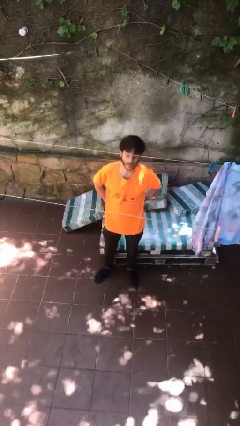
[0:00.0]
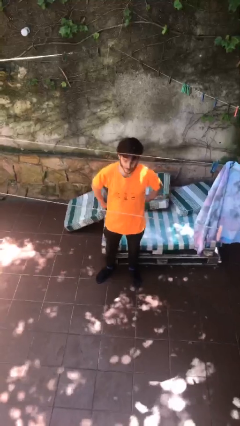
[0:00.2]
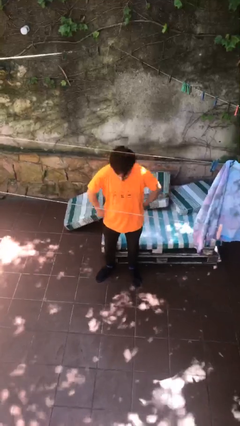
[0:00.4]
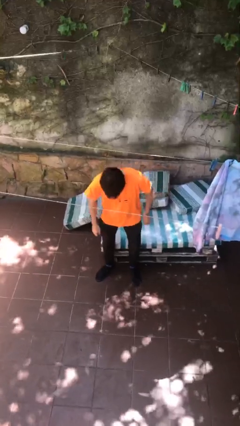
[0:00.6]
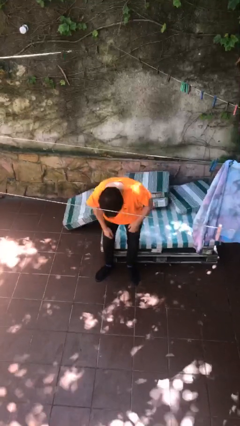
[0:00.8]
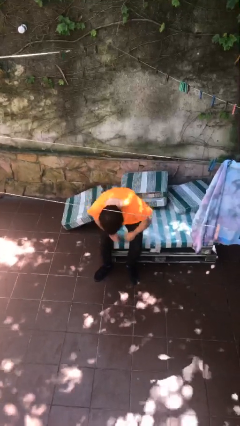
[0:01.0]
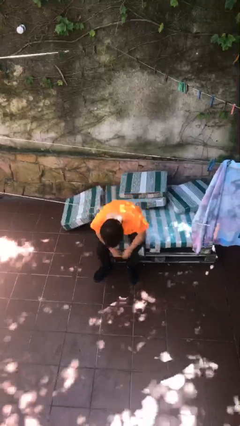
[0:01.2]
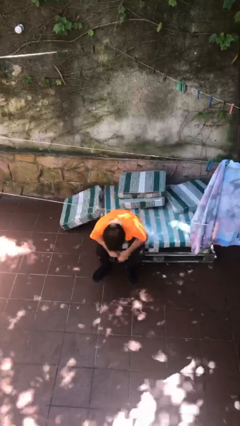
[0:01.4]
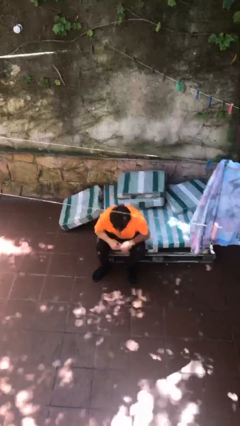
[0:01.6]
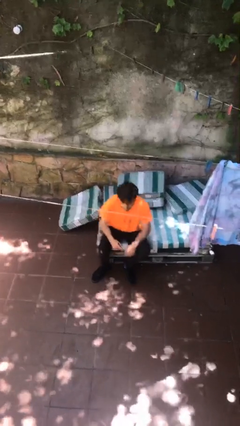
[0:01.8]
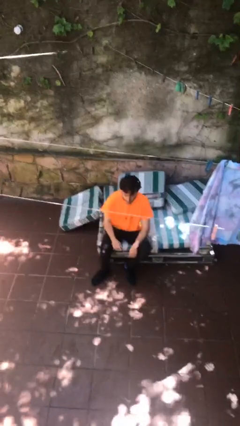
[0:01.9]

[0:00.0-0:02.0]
person sits down

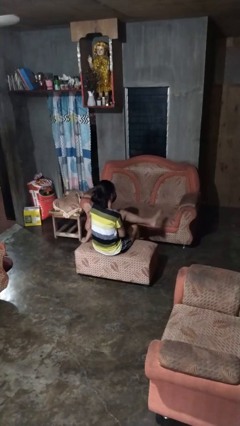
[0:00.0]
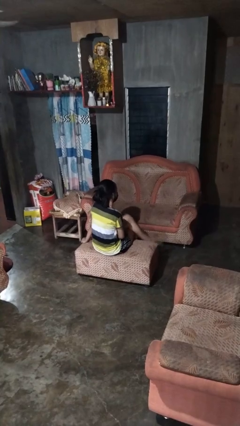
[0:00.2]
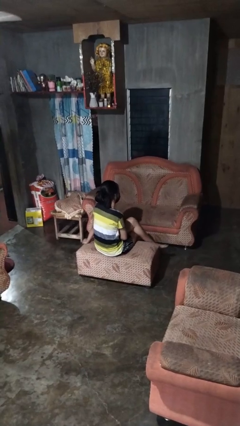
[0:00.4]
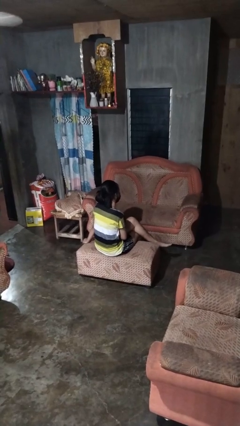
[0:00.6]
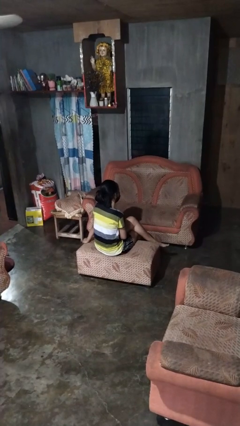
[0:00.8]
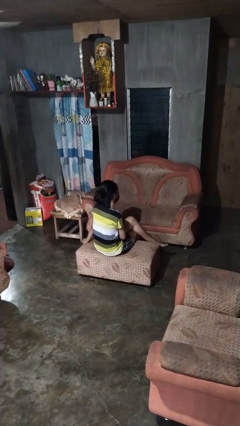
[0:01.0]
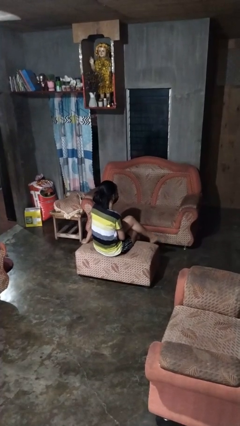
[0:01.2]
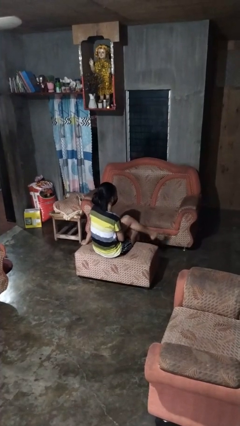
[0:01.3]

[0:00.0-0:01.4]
person crosses legs

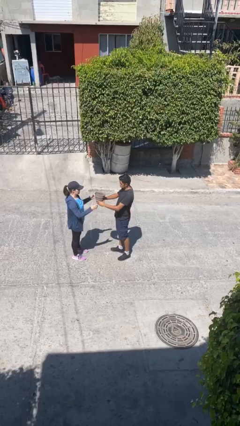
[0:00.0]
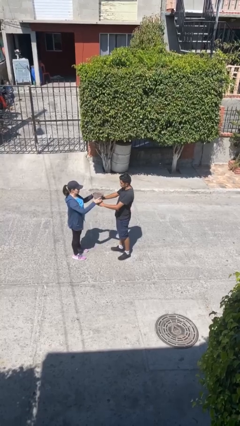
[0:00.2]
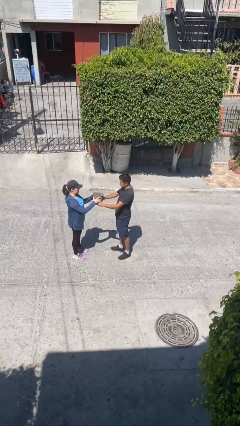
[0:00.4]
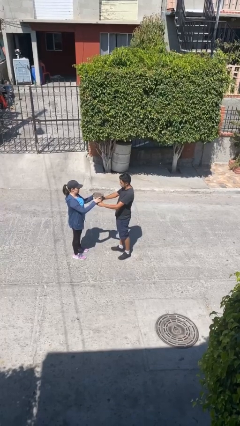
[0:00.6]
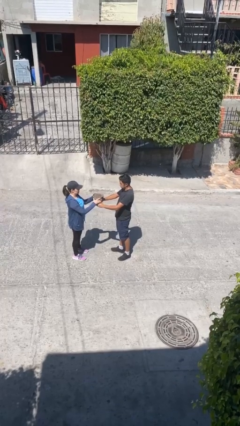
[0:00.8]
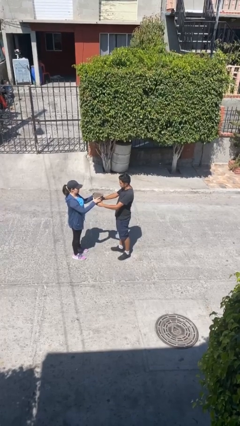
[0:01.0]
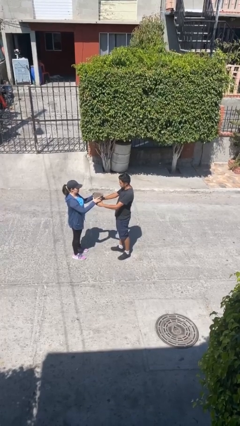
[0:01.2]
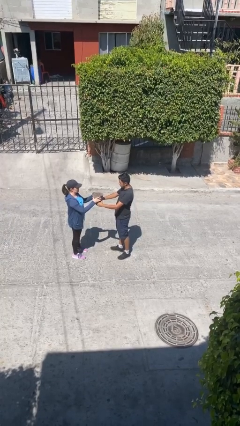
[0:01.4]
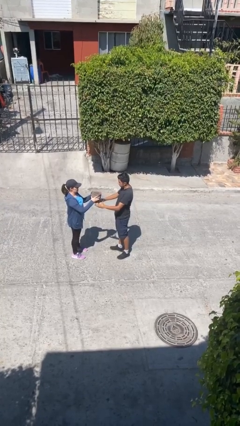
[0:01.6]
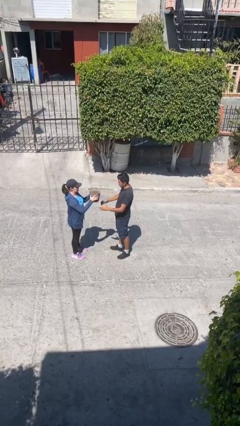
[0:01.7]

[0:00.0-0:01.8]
person transfers object to person

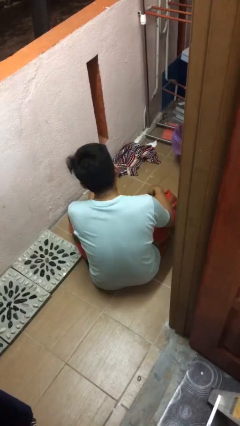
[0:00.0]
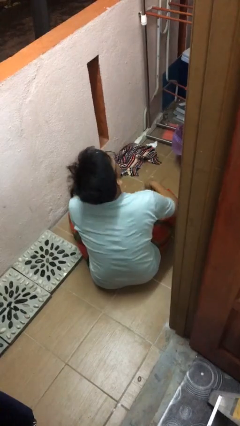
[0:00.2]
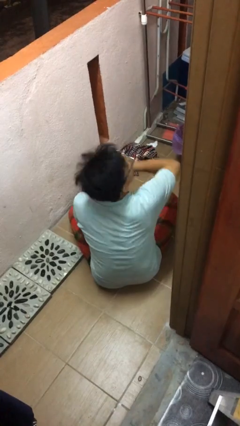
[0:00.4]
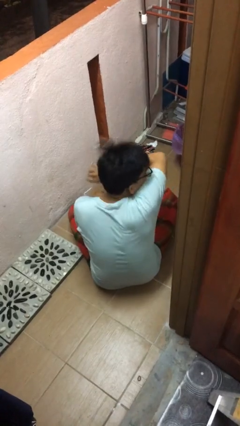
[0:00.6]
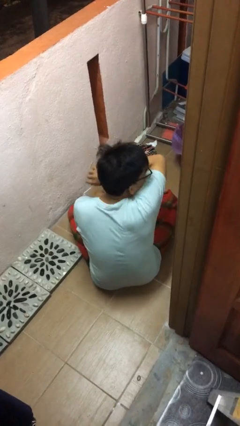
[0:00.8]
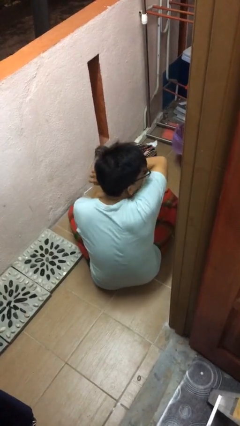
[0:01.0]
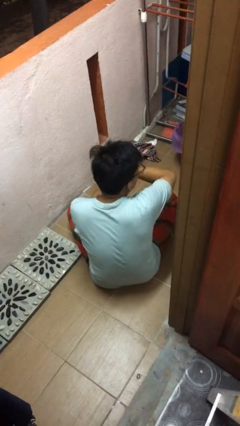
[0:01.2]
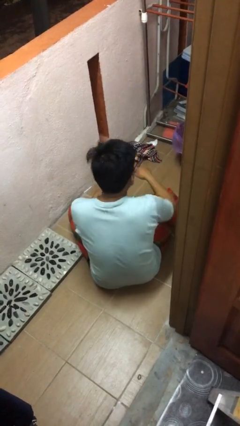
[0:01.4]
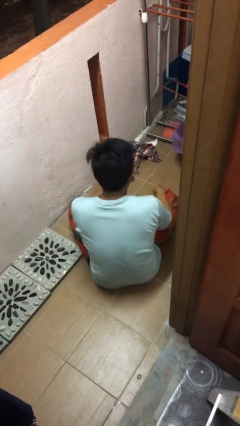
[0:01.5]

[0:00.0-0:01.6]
person sneezes into arm

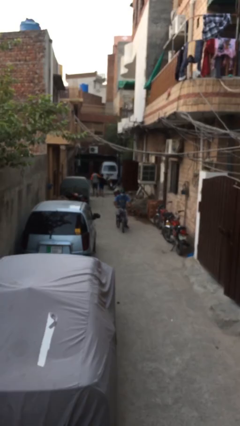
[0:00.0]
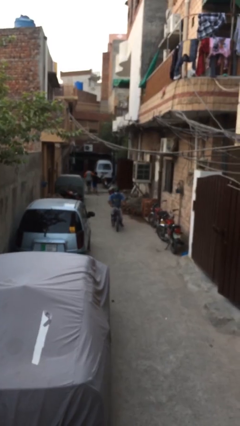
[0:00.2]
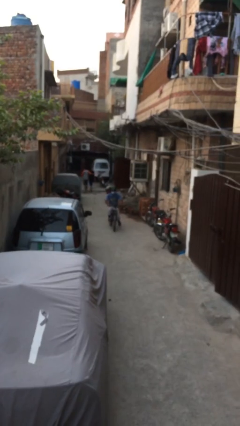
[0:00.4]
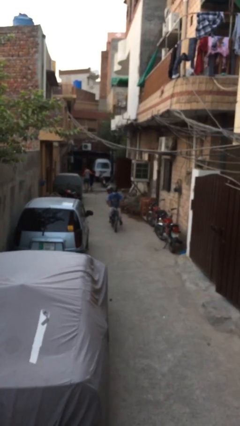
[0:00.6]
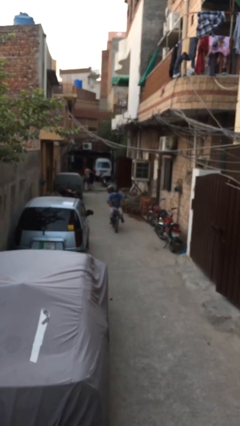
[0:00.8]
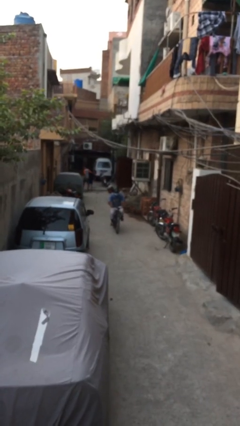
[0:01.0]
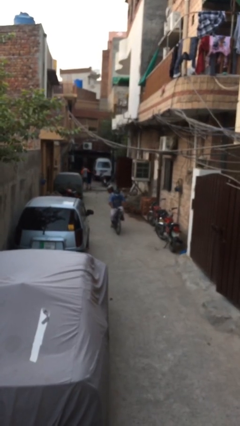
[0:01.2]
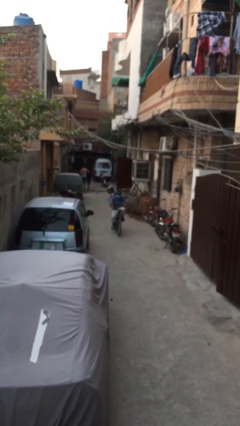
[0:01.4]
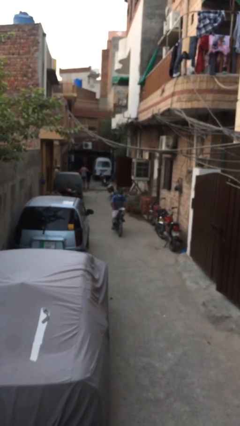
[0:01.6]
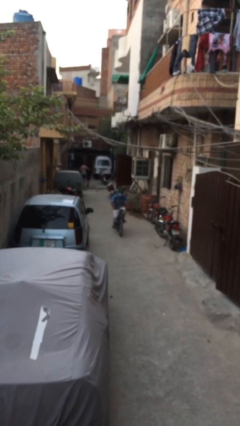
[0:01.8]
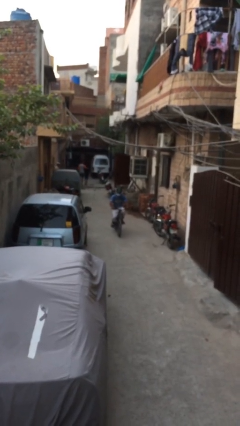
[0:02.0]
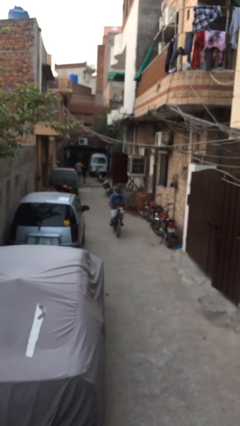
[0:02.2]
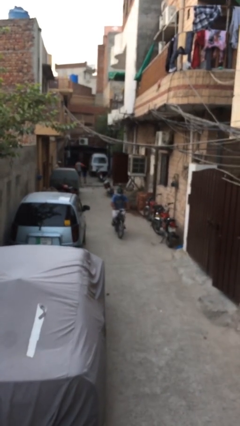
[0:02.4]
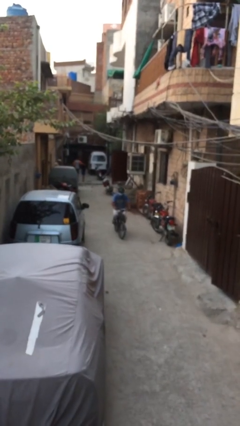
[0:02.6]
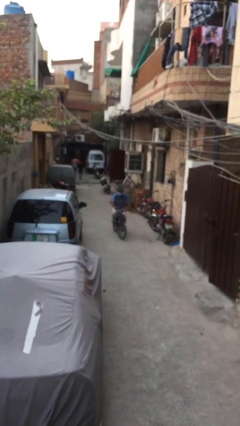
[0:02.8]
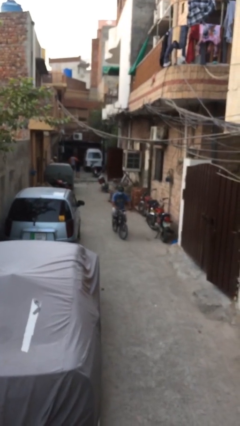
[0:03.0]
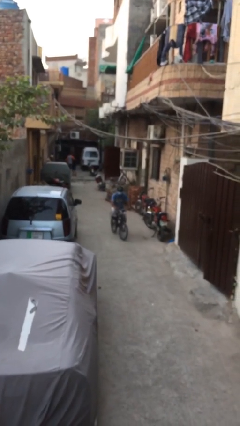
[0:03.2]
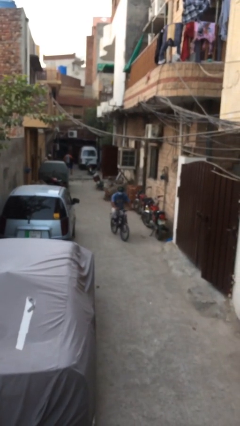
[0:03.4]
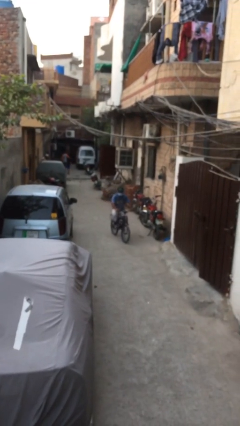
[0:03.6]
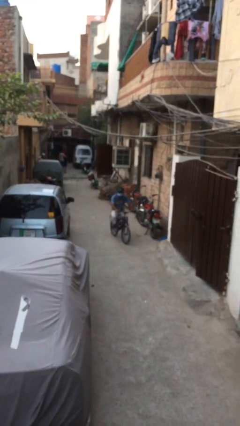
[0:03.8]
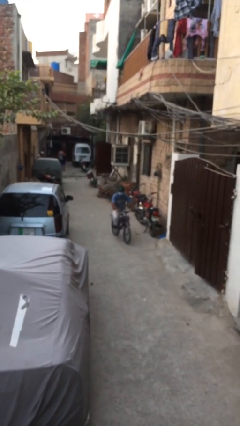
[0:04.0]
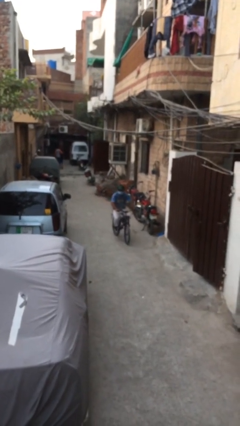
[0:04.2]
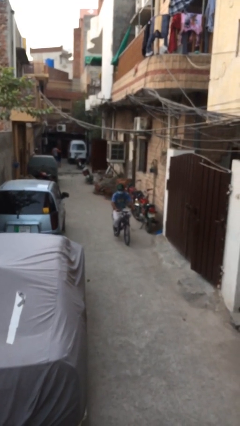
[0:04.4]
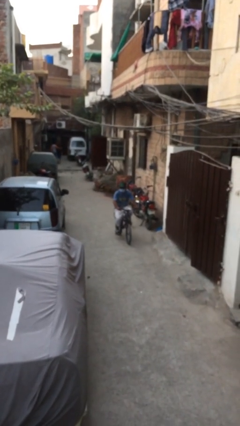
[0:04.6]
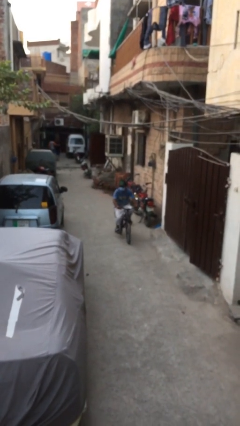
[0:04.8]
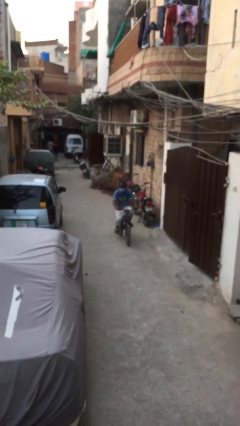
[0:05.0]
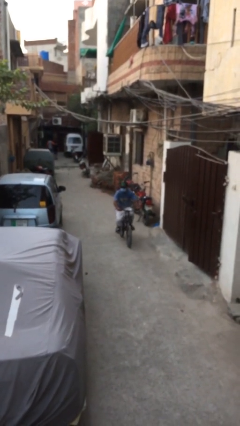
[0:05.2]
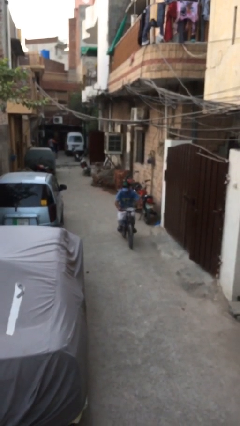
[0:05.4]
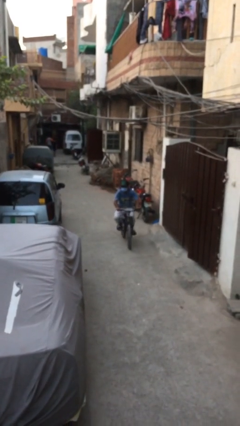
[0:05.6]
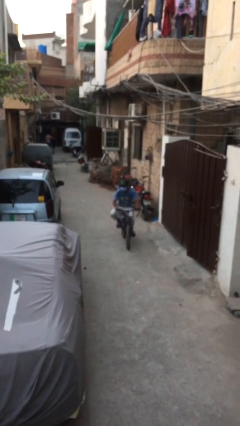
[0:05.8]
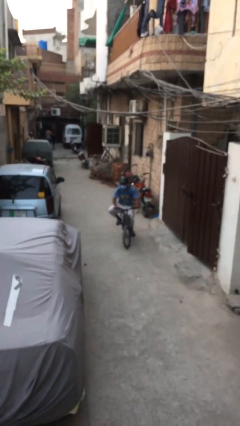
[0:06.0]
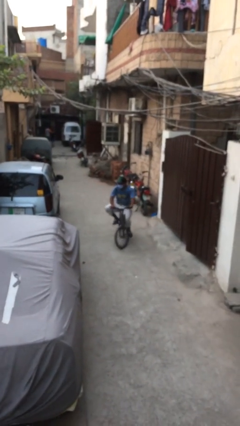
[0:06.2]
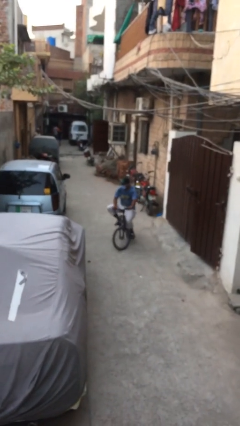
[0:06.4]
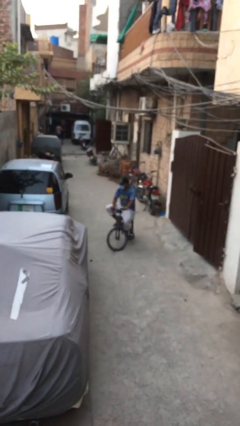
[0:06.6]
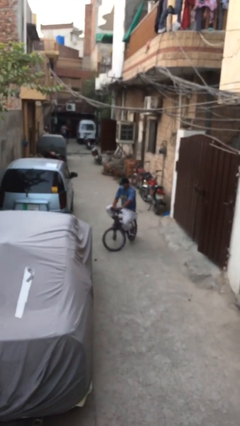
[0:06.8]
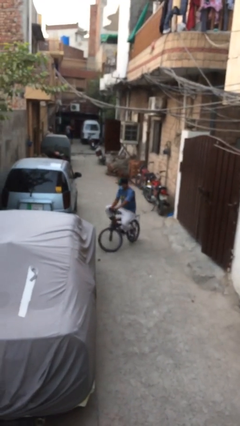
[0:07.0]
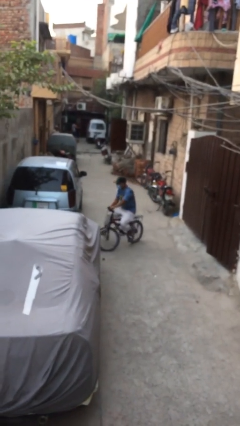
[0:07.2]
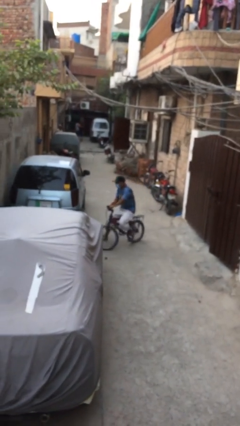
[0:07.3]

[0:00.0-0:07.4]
person rides bicycle

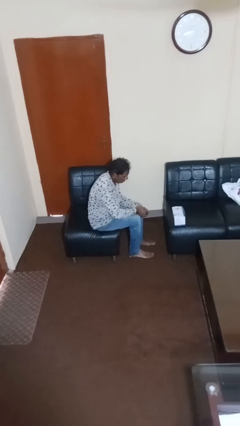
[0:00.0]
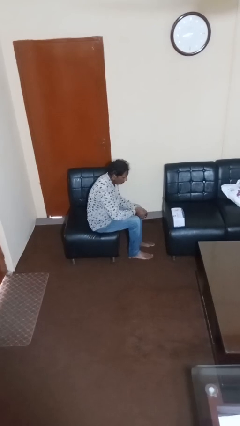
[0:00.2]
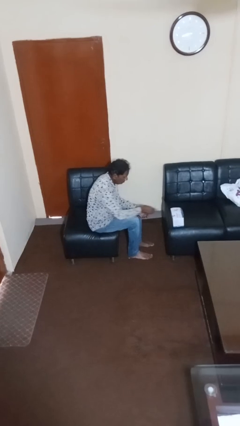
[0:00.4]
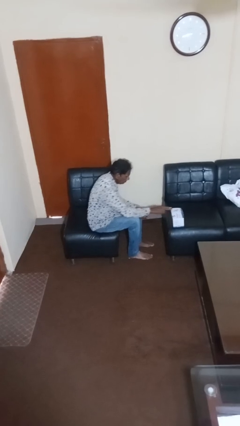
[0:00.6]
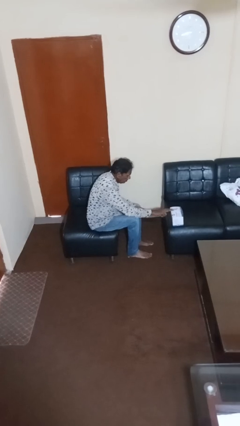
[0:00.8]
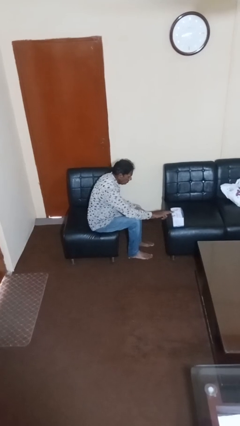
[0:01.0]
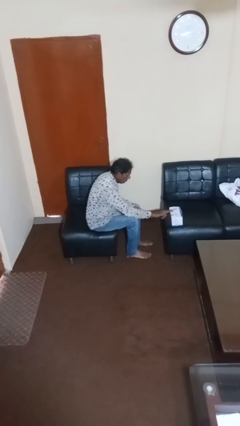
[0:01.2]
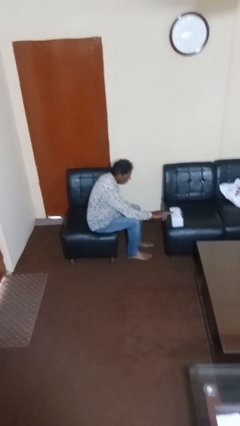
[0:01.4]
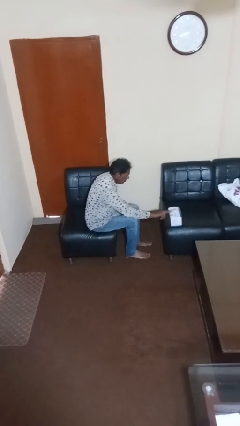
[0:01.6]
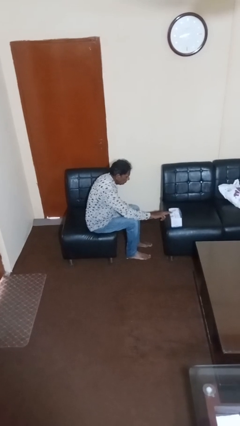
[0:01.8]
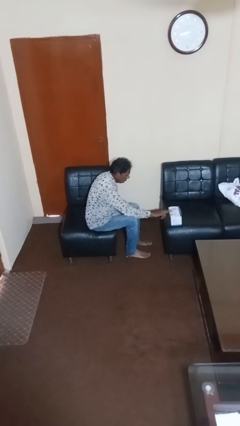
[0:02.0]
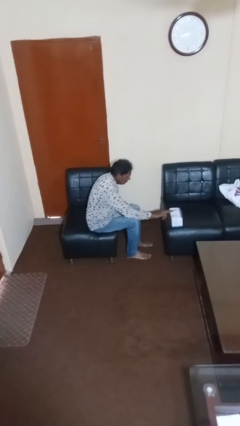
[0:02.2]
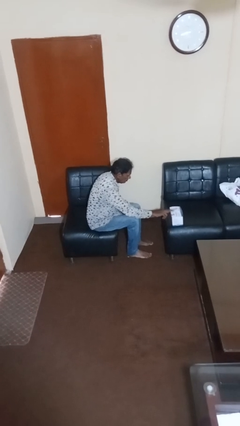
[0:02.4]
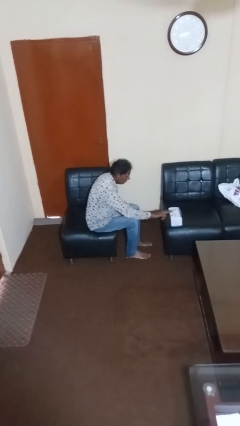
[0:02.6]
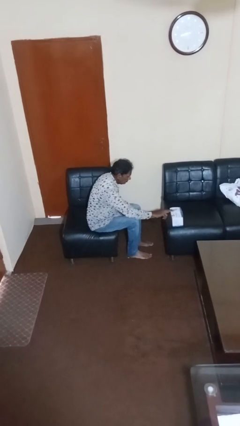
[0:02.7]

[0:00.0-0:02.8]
person taps object with finger

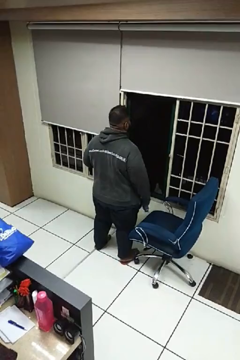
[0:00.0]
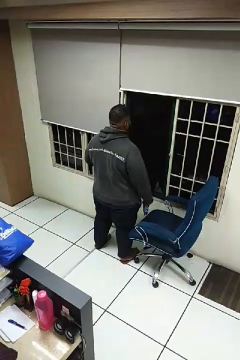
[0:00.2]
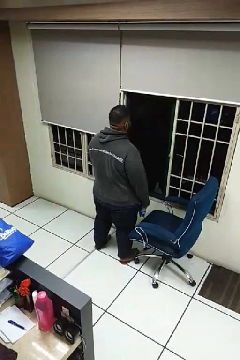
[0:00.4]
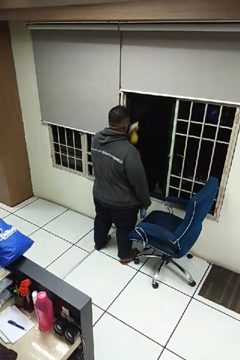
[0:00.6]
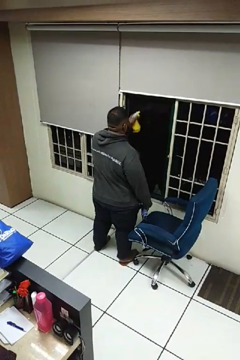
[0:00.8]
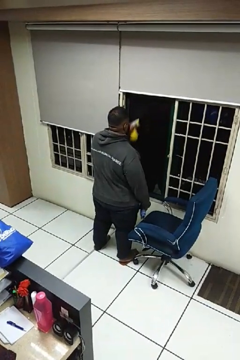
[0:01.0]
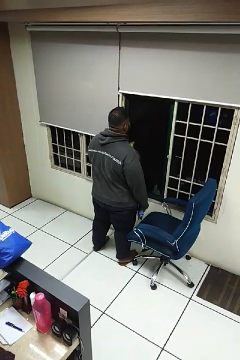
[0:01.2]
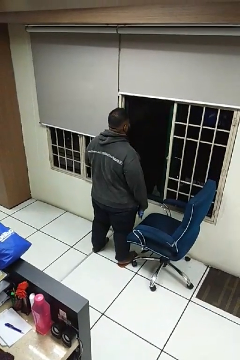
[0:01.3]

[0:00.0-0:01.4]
person sprays from bottle
